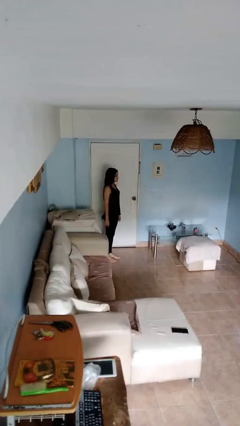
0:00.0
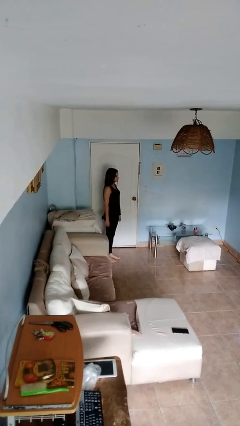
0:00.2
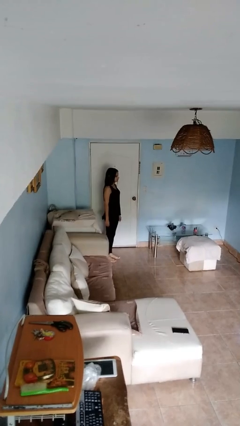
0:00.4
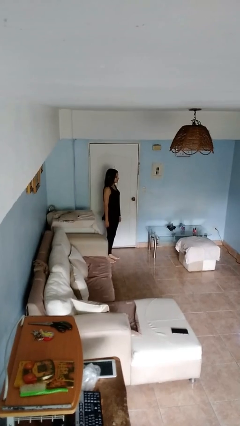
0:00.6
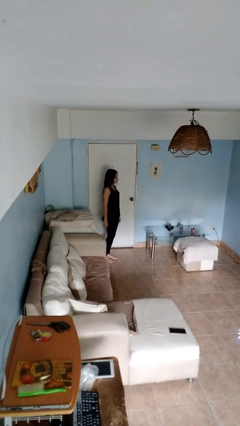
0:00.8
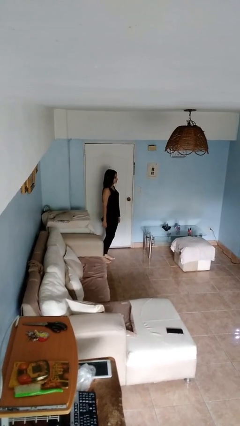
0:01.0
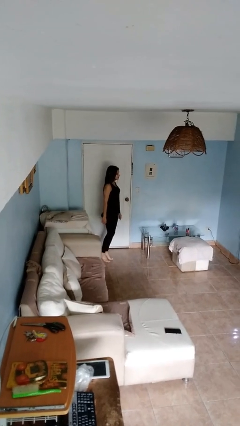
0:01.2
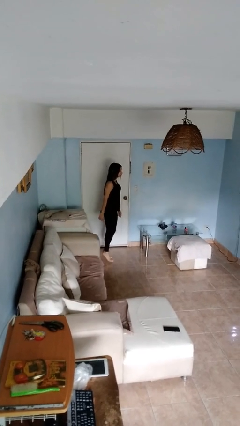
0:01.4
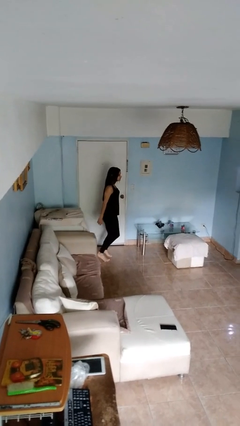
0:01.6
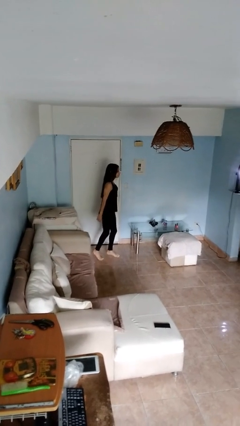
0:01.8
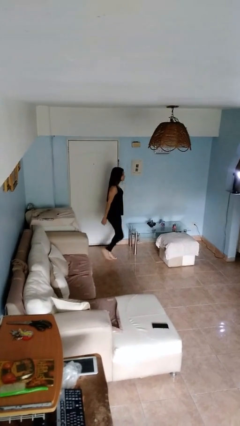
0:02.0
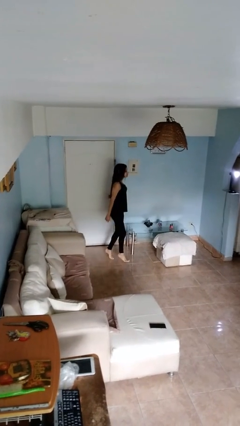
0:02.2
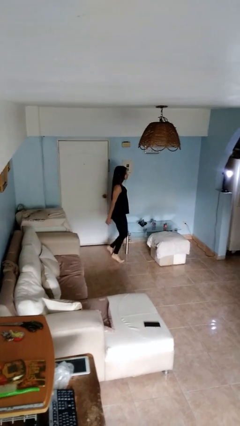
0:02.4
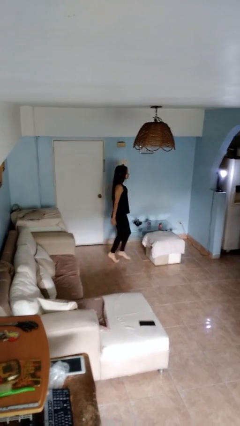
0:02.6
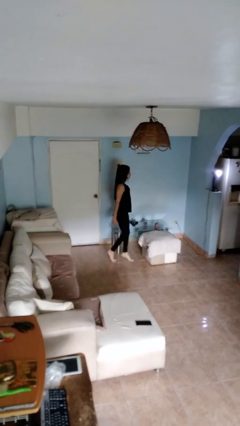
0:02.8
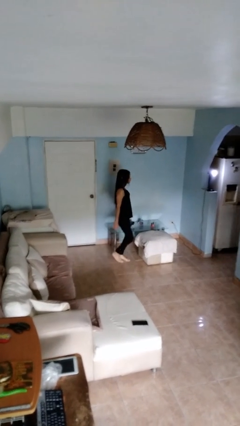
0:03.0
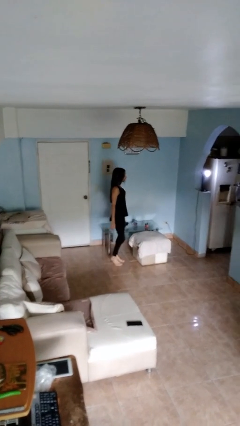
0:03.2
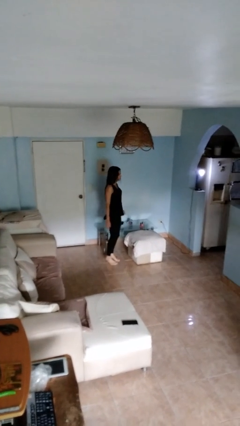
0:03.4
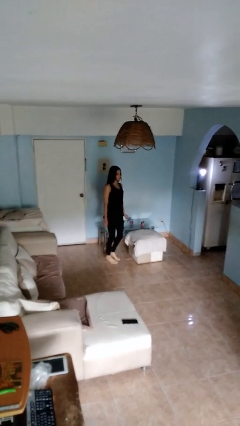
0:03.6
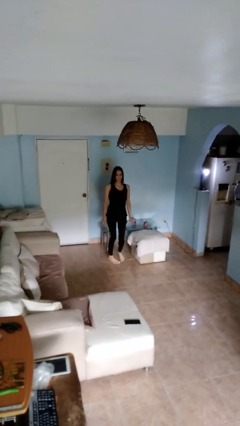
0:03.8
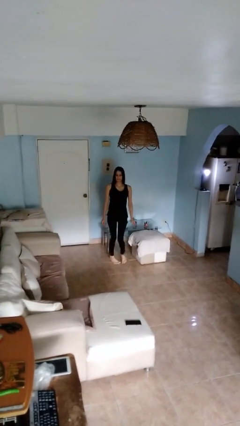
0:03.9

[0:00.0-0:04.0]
person walks tiptoe

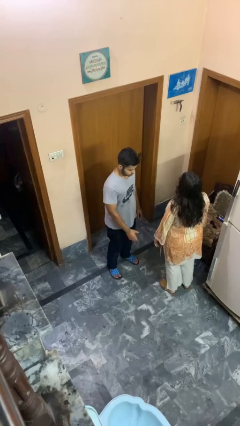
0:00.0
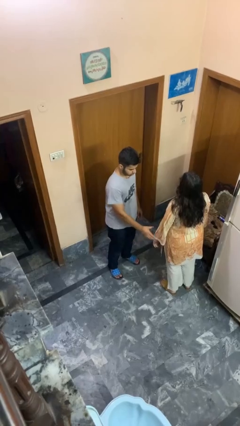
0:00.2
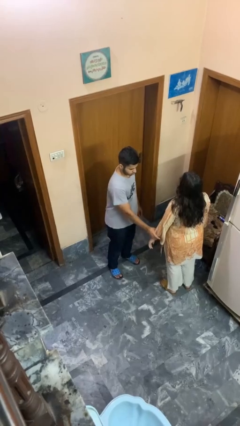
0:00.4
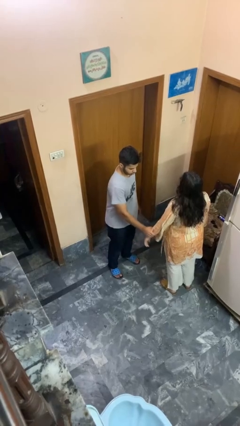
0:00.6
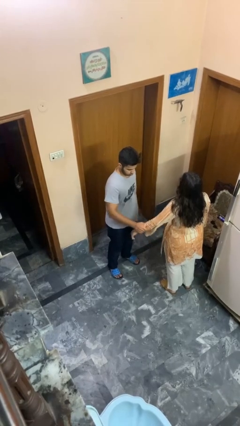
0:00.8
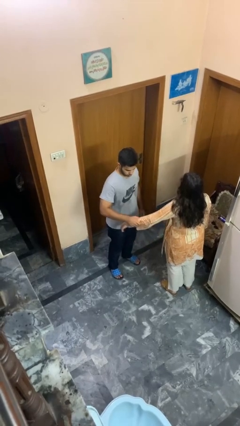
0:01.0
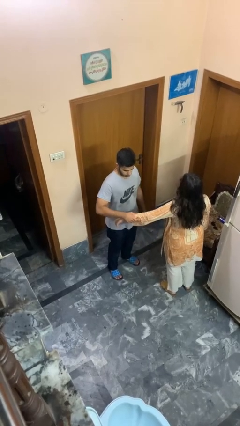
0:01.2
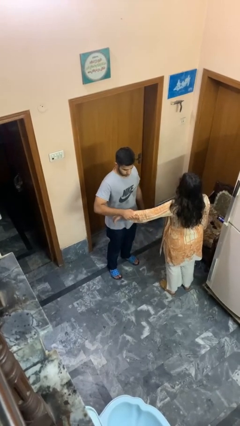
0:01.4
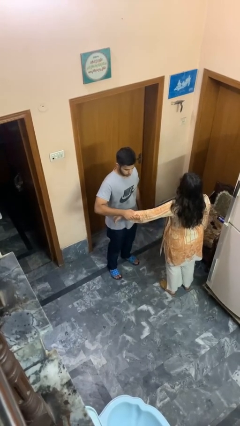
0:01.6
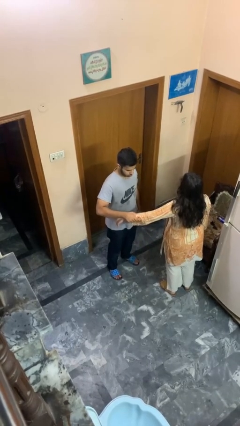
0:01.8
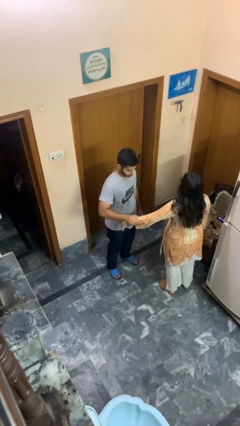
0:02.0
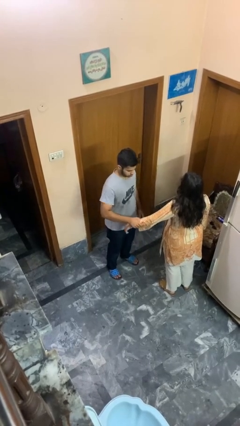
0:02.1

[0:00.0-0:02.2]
person grabs person by forearm

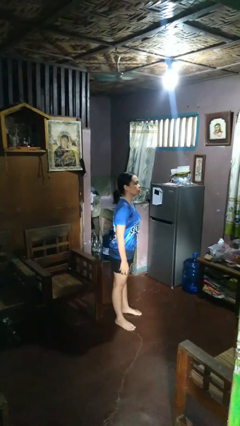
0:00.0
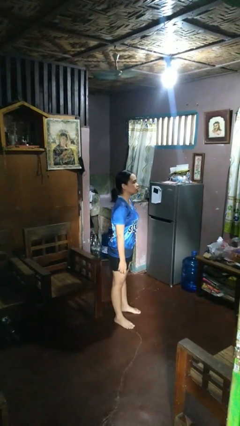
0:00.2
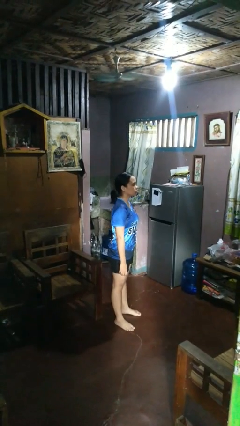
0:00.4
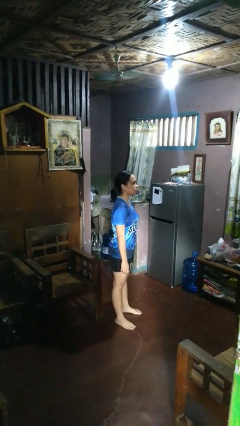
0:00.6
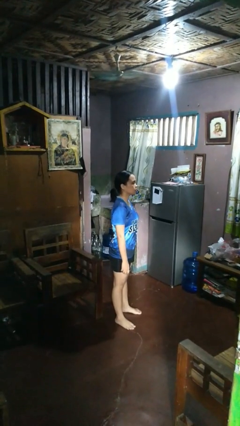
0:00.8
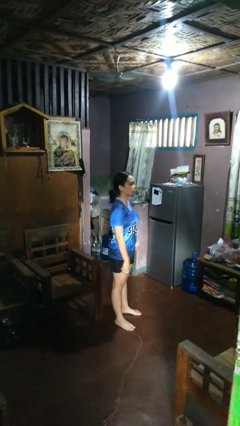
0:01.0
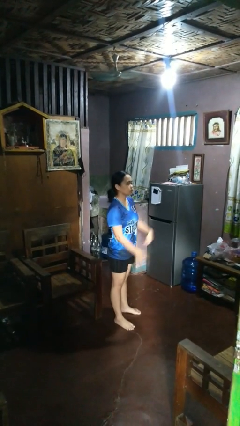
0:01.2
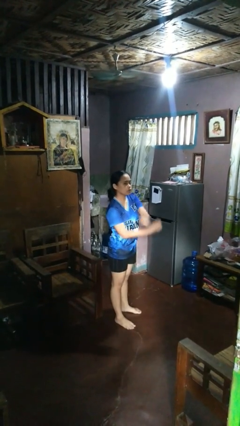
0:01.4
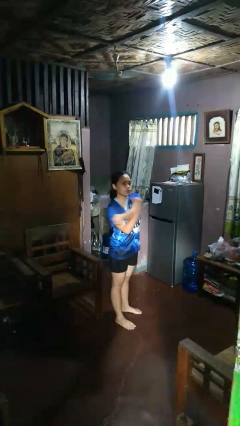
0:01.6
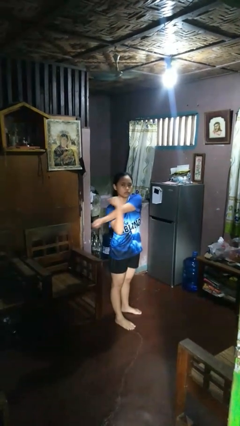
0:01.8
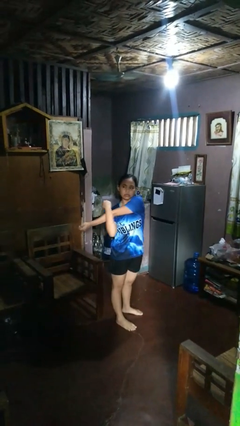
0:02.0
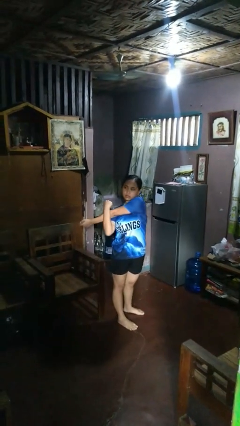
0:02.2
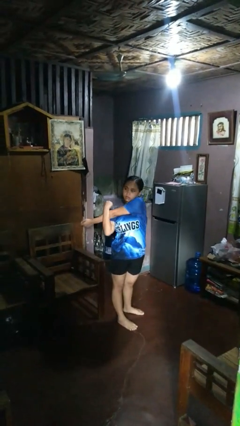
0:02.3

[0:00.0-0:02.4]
person stretches arms to side

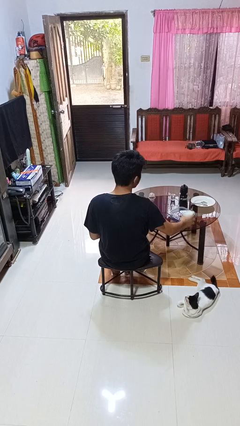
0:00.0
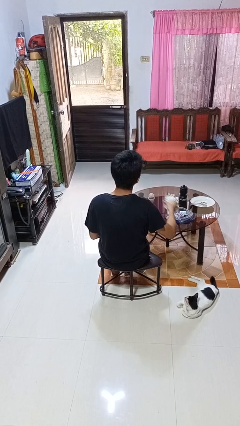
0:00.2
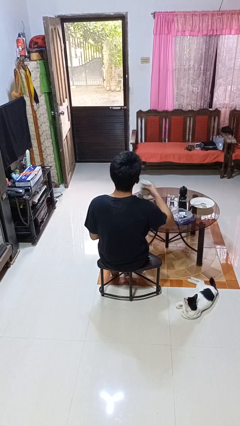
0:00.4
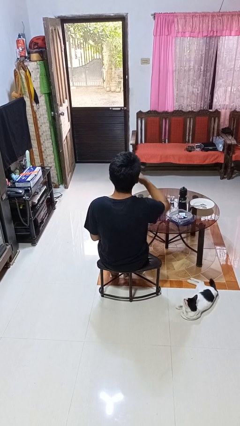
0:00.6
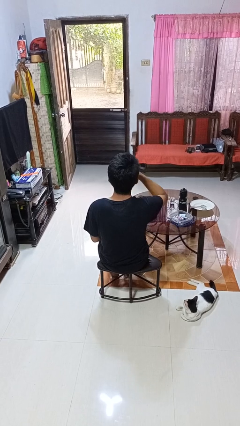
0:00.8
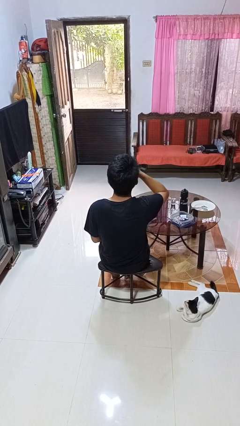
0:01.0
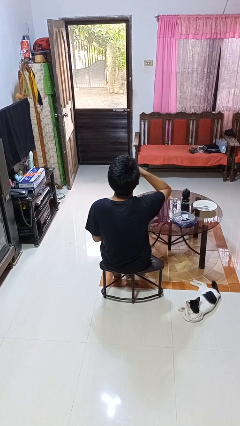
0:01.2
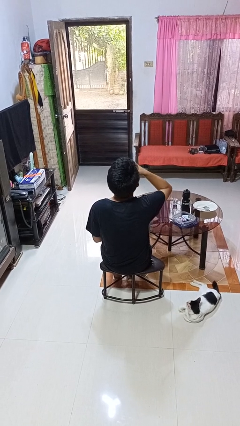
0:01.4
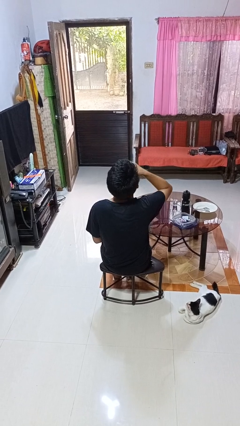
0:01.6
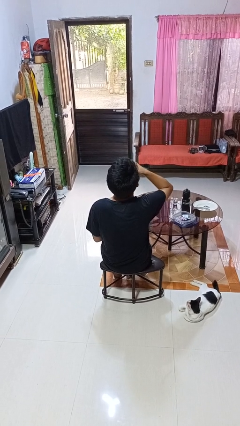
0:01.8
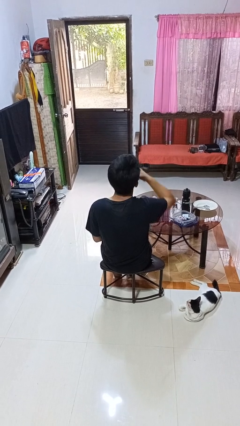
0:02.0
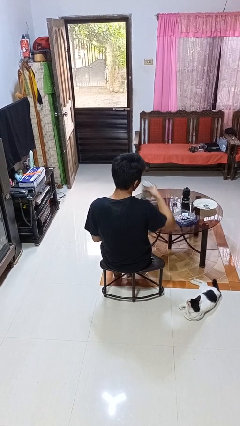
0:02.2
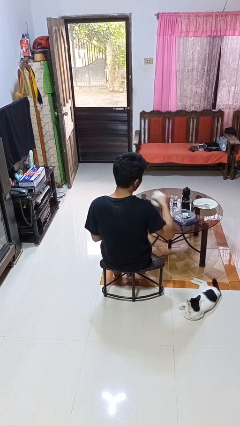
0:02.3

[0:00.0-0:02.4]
person drinks from cup

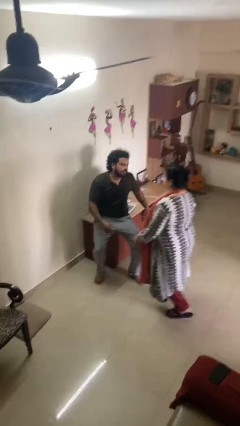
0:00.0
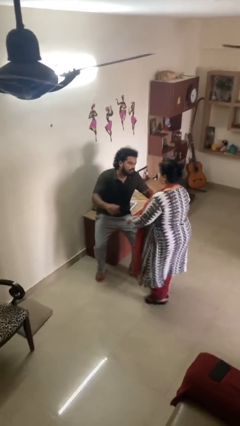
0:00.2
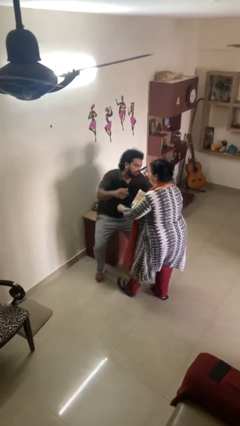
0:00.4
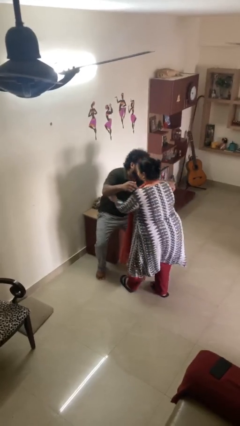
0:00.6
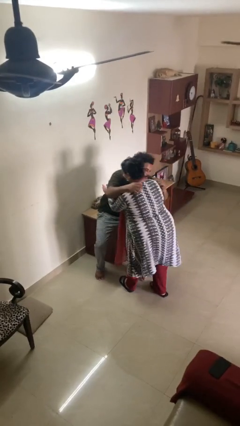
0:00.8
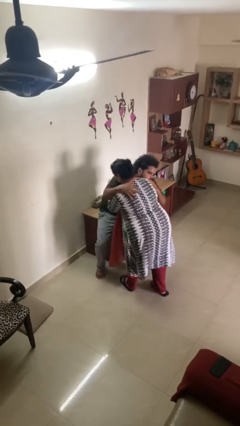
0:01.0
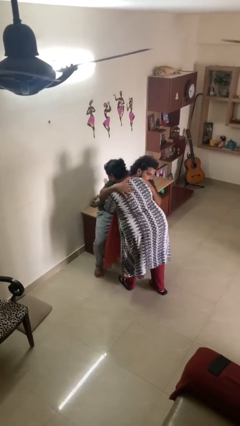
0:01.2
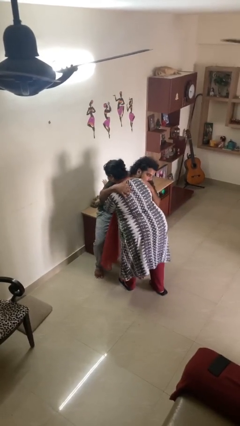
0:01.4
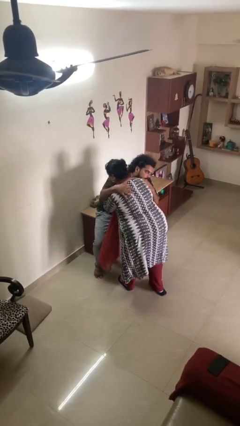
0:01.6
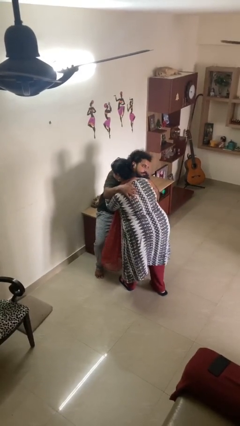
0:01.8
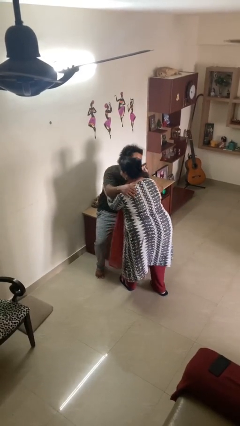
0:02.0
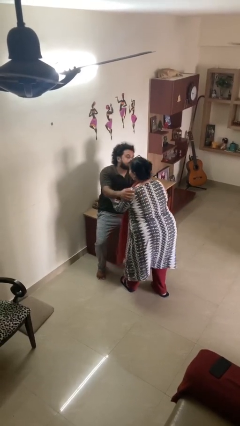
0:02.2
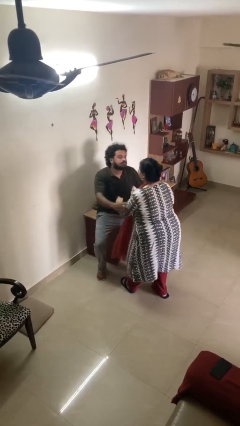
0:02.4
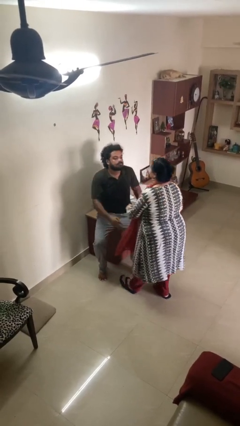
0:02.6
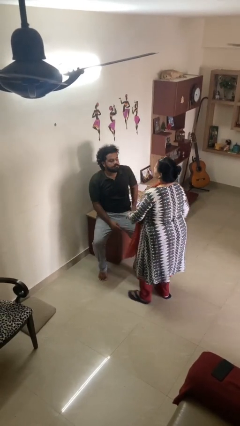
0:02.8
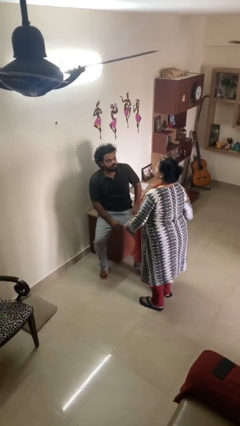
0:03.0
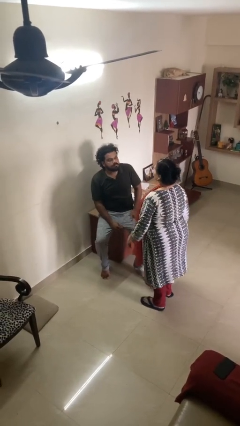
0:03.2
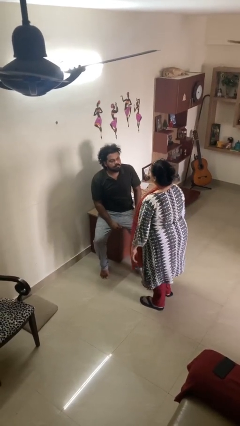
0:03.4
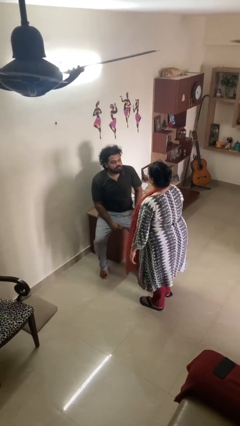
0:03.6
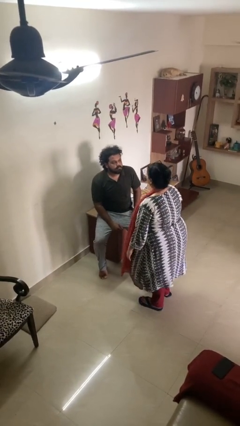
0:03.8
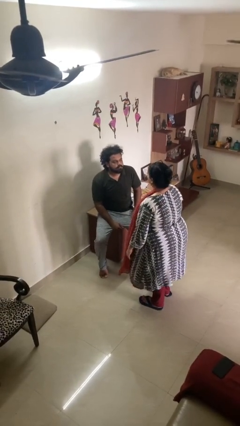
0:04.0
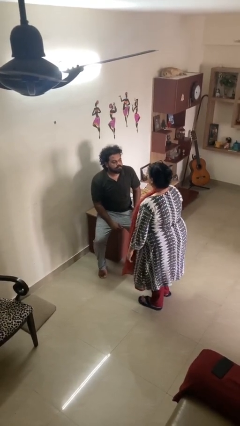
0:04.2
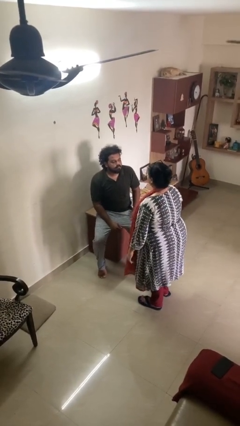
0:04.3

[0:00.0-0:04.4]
person embraces person

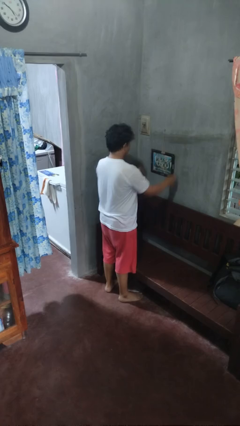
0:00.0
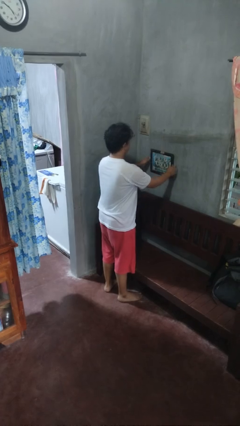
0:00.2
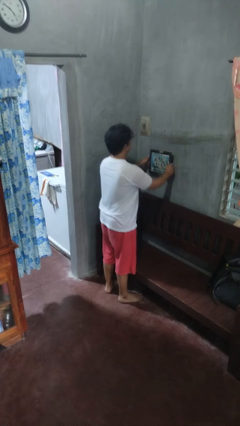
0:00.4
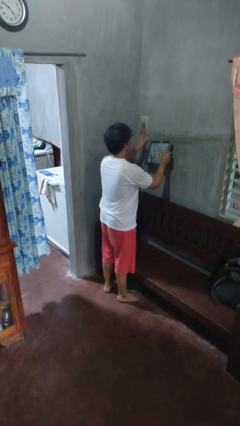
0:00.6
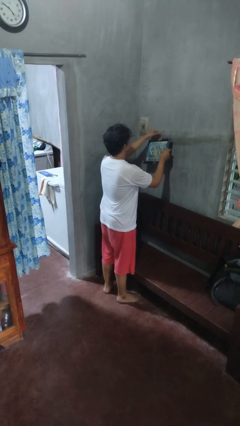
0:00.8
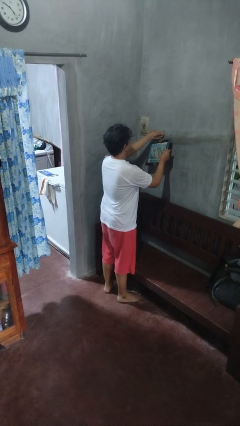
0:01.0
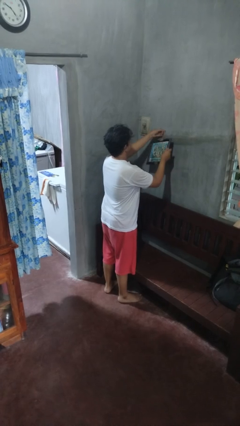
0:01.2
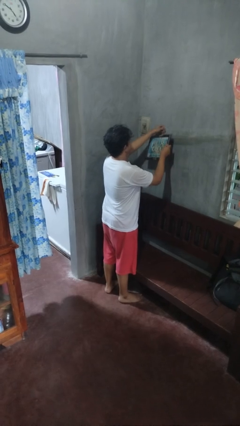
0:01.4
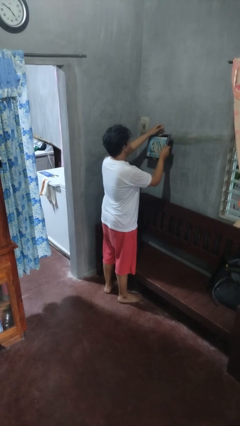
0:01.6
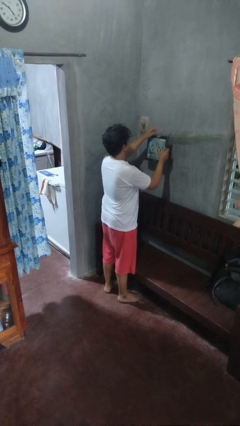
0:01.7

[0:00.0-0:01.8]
person takes down picture frame

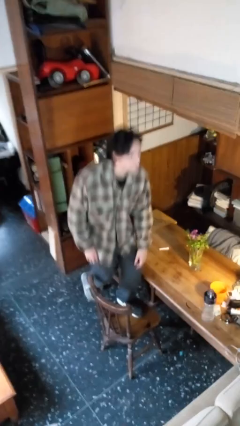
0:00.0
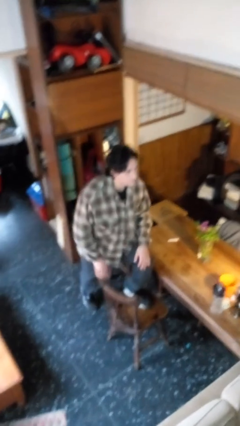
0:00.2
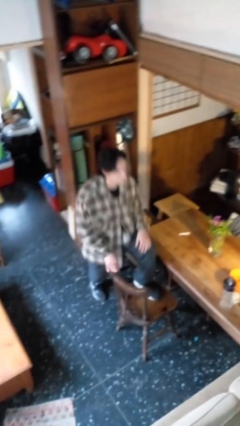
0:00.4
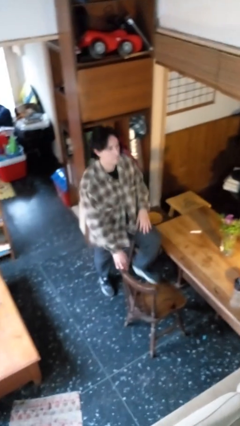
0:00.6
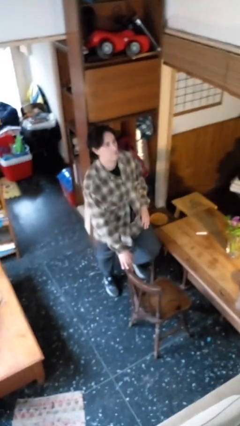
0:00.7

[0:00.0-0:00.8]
person climbs off chair
